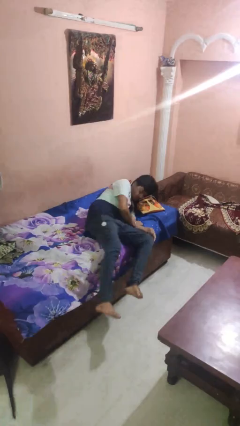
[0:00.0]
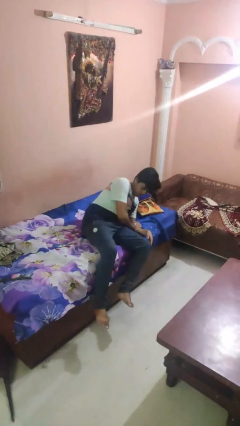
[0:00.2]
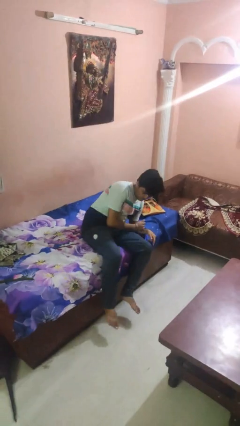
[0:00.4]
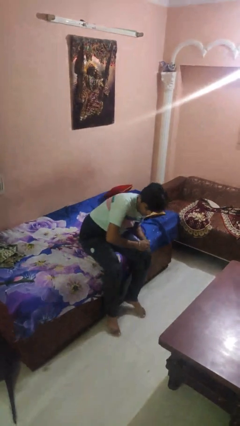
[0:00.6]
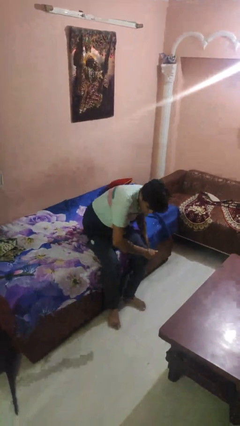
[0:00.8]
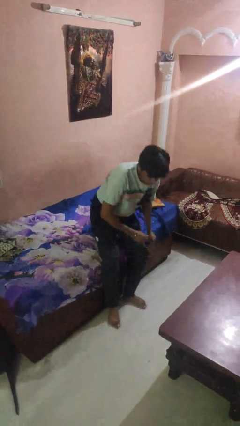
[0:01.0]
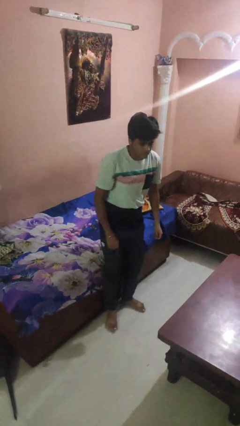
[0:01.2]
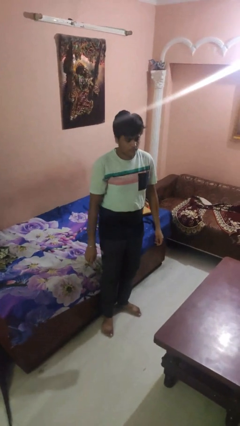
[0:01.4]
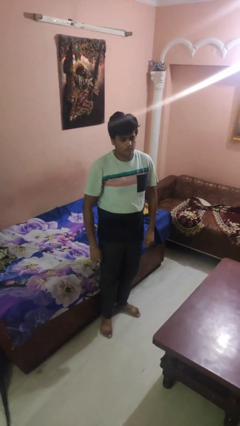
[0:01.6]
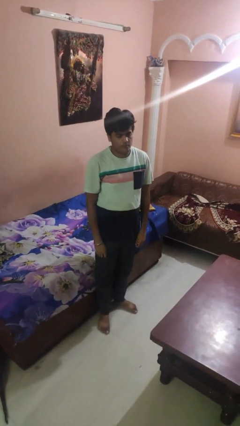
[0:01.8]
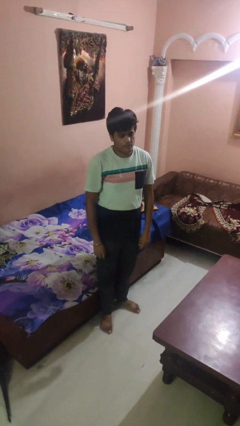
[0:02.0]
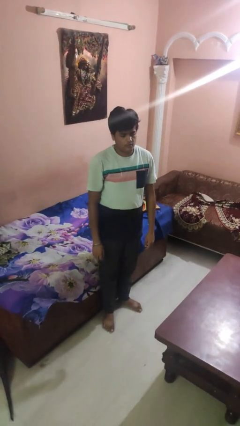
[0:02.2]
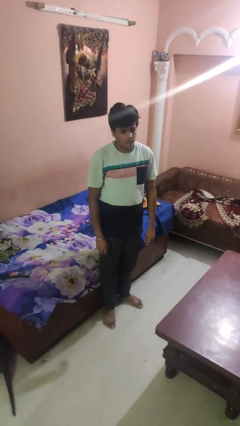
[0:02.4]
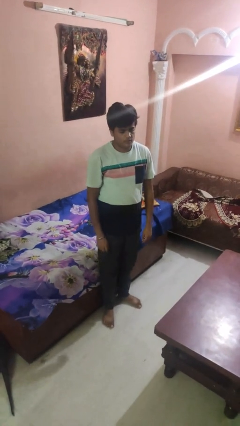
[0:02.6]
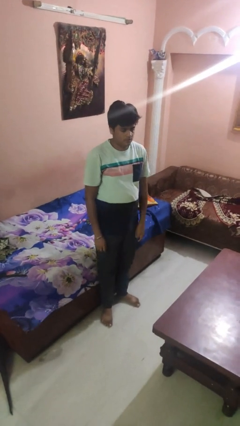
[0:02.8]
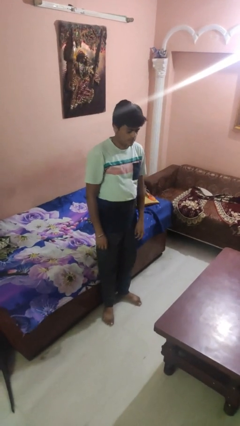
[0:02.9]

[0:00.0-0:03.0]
person stands up

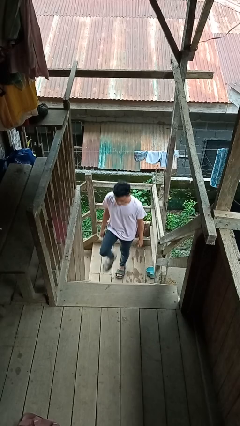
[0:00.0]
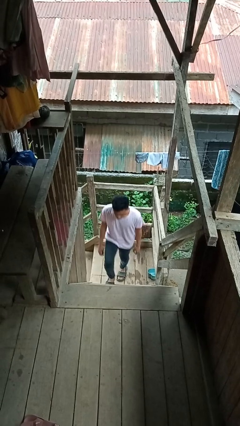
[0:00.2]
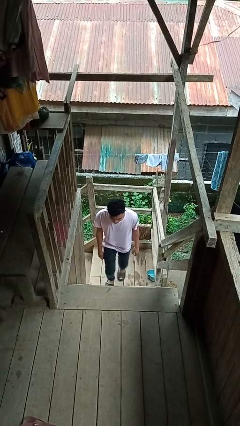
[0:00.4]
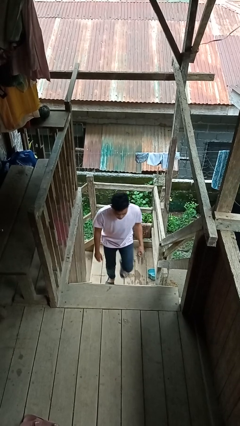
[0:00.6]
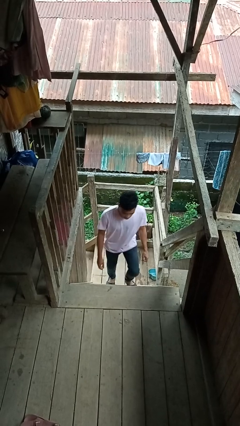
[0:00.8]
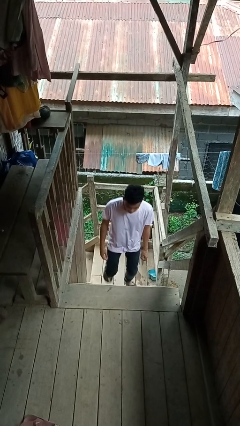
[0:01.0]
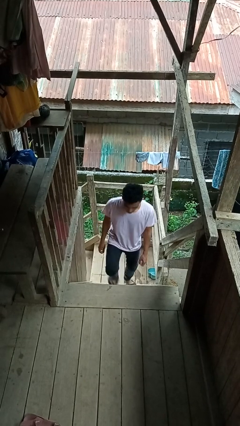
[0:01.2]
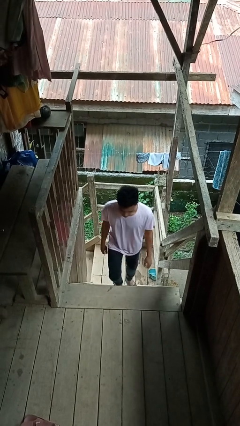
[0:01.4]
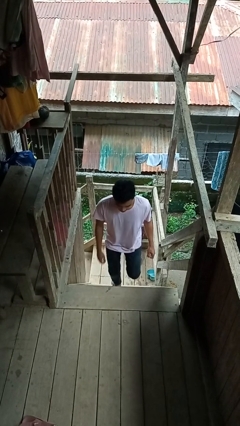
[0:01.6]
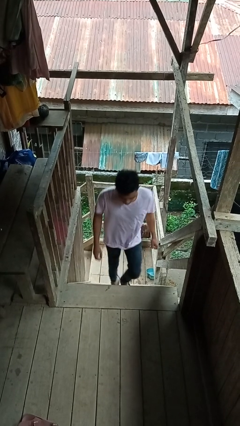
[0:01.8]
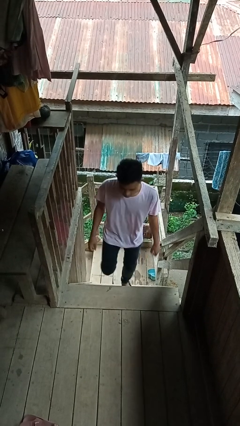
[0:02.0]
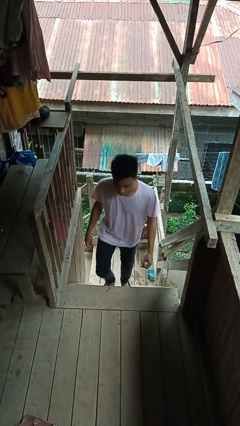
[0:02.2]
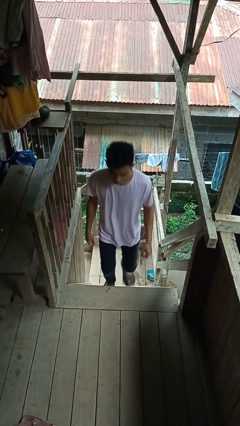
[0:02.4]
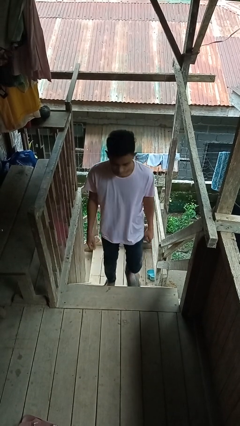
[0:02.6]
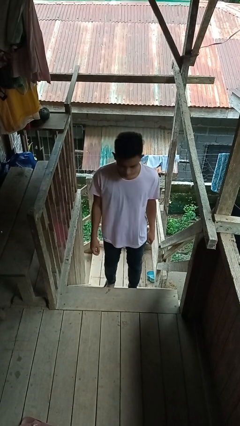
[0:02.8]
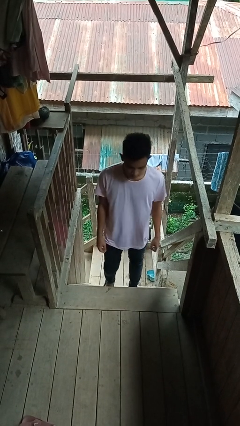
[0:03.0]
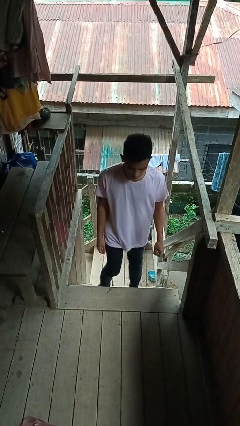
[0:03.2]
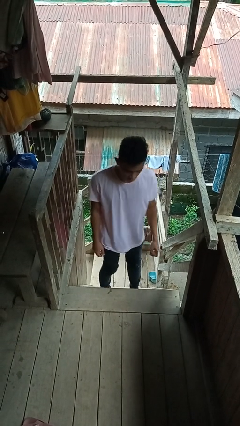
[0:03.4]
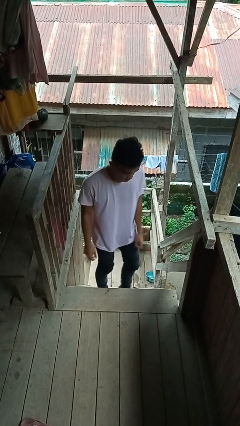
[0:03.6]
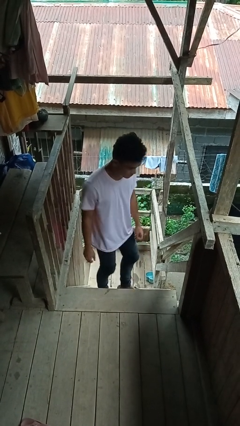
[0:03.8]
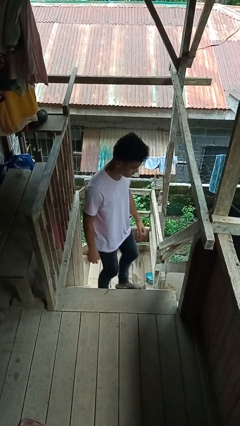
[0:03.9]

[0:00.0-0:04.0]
person climbs up stairs

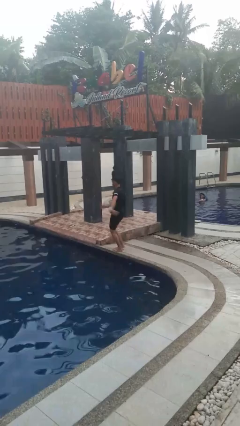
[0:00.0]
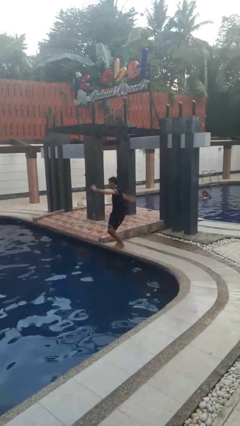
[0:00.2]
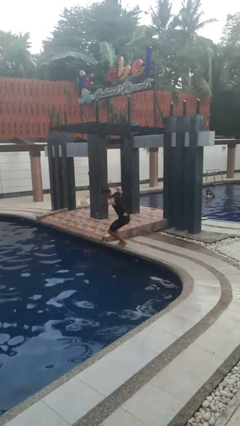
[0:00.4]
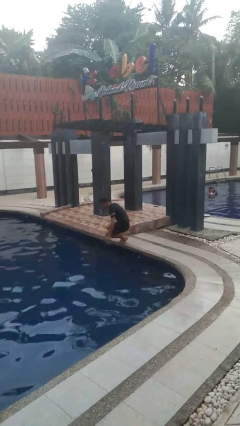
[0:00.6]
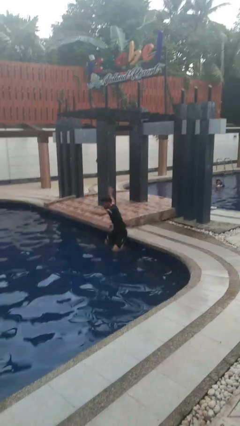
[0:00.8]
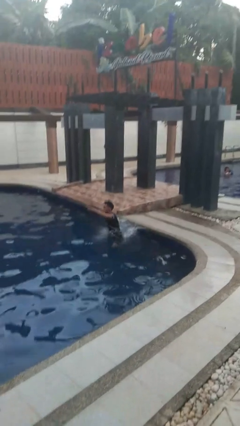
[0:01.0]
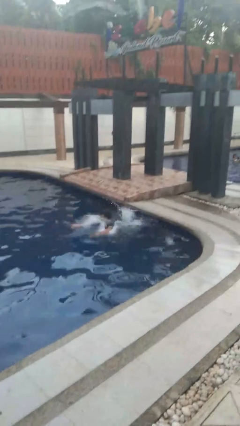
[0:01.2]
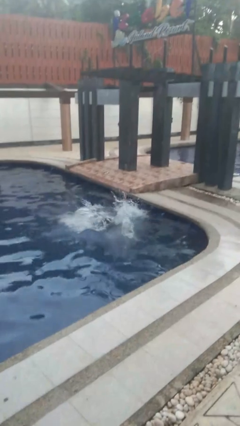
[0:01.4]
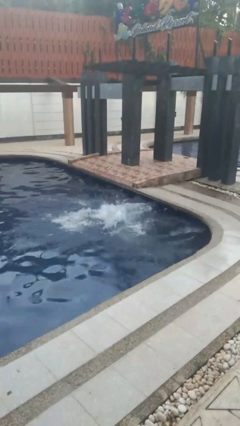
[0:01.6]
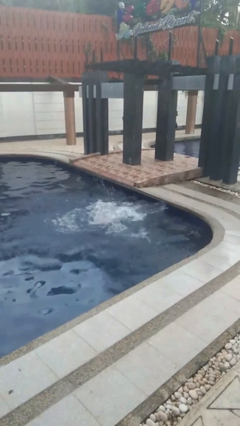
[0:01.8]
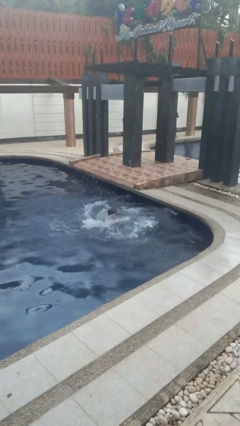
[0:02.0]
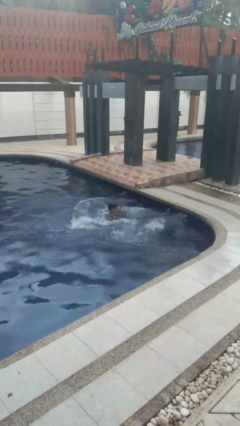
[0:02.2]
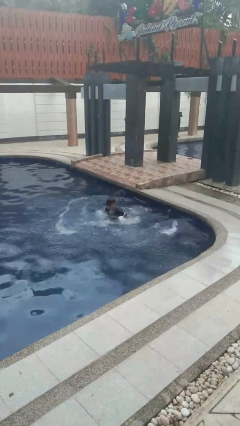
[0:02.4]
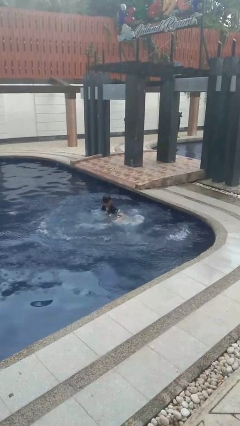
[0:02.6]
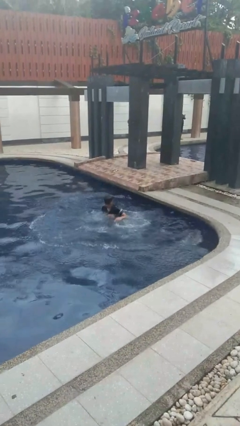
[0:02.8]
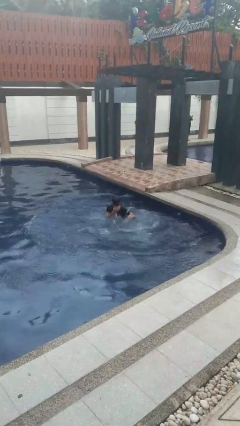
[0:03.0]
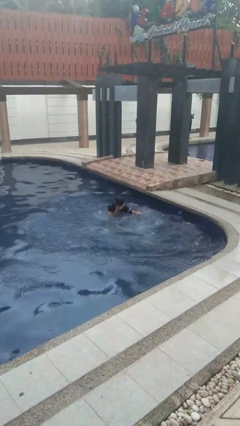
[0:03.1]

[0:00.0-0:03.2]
person falls into pool

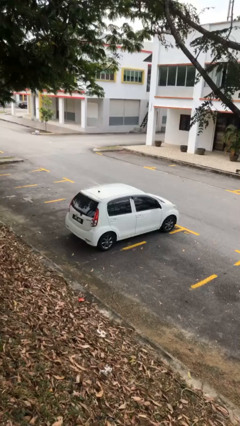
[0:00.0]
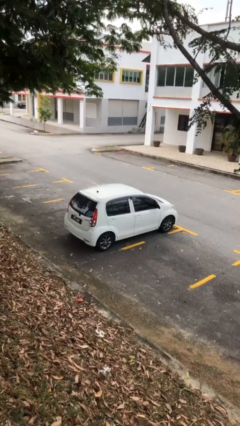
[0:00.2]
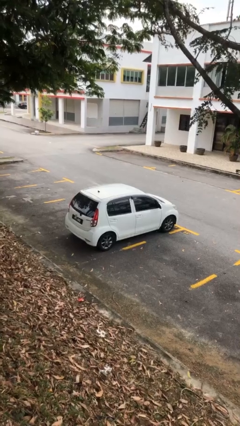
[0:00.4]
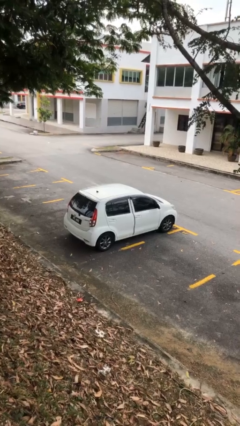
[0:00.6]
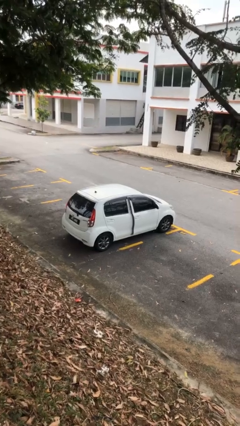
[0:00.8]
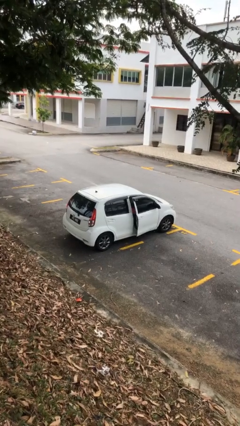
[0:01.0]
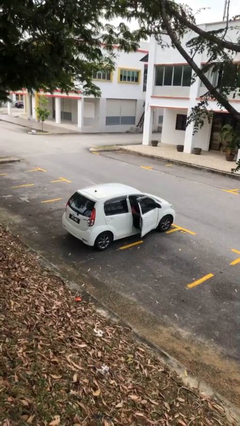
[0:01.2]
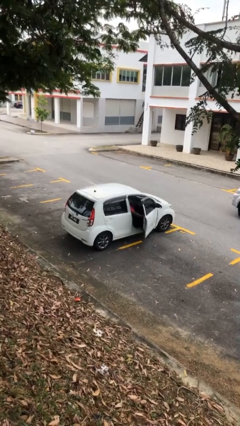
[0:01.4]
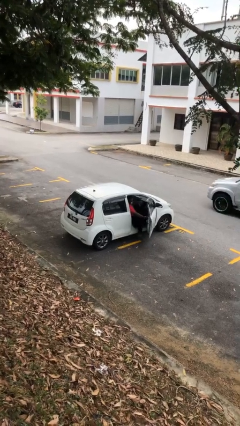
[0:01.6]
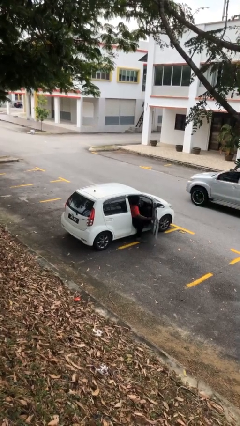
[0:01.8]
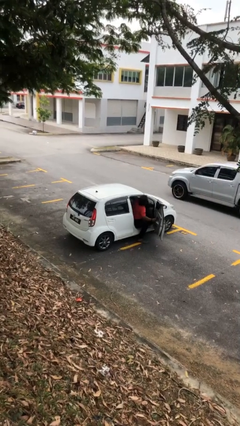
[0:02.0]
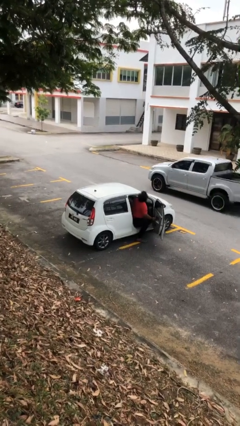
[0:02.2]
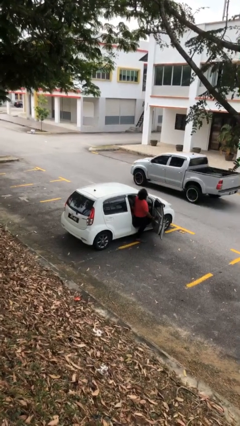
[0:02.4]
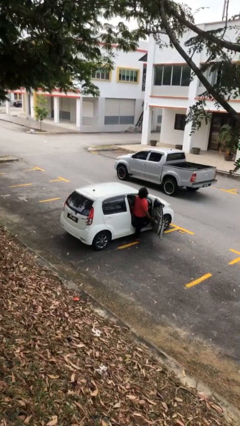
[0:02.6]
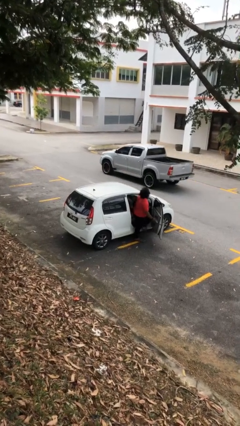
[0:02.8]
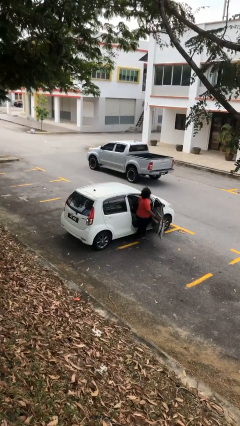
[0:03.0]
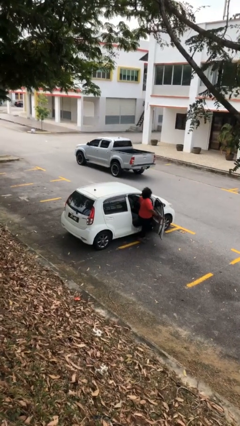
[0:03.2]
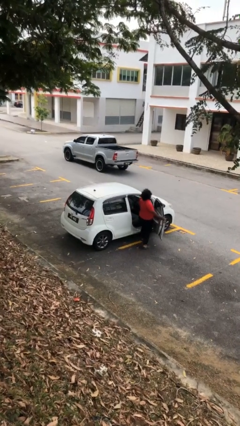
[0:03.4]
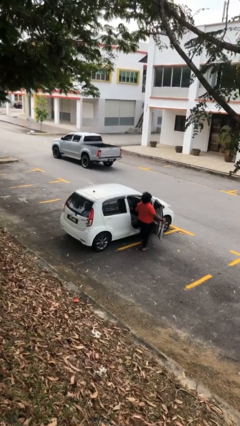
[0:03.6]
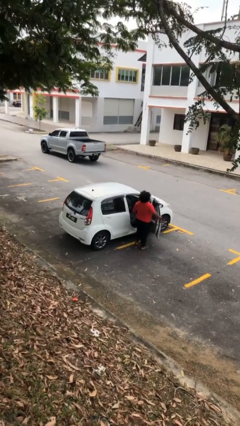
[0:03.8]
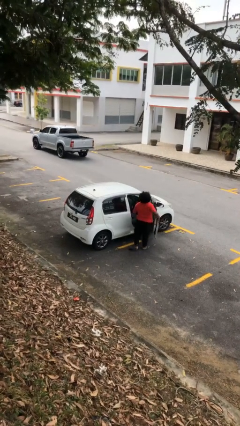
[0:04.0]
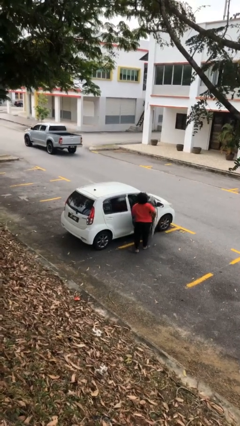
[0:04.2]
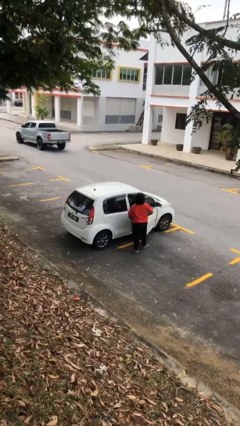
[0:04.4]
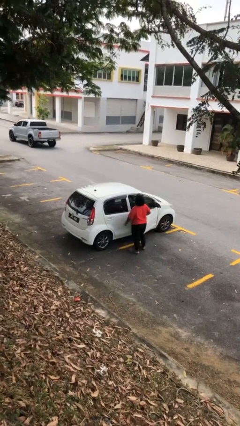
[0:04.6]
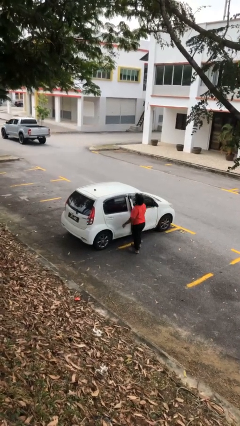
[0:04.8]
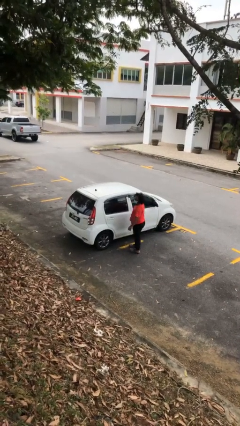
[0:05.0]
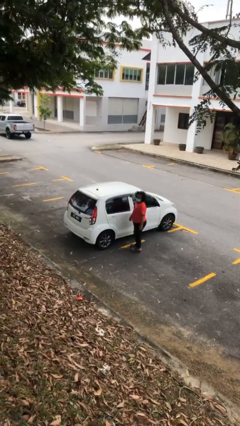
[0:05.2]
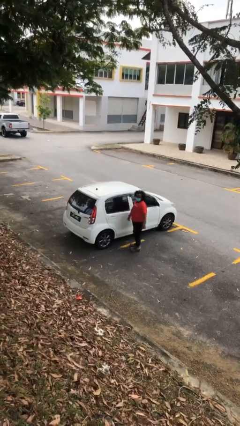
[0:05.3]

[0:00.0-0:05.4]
car drops off person

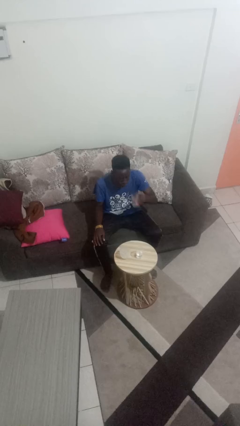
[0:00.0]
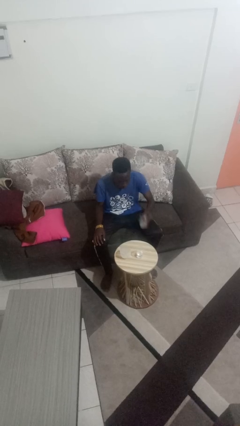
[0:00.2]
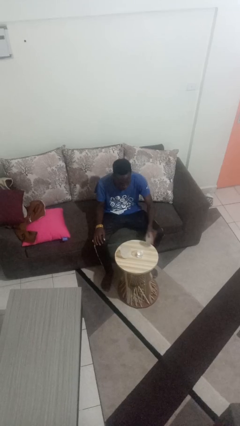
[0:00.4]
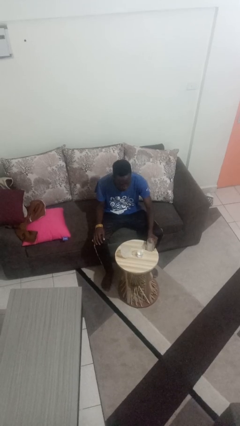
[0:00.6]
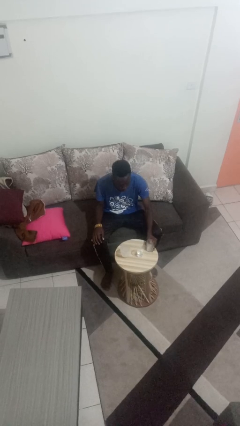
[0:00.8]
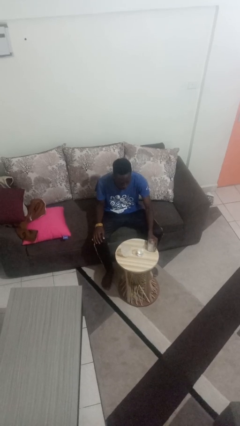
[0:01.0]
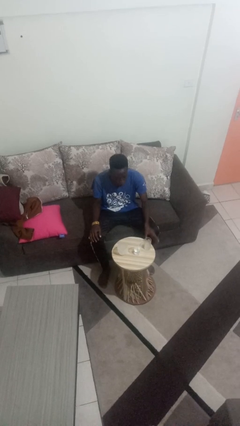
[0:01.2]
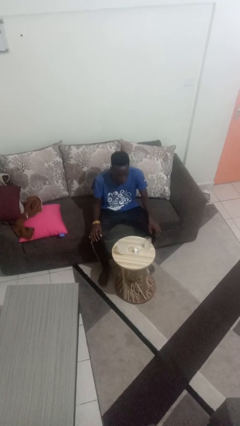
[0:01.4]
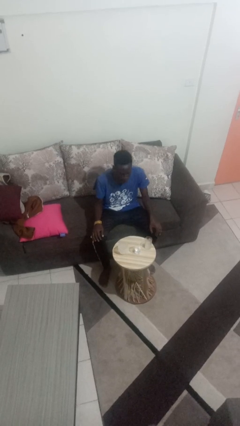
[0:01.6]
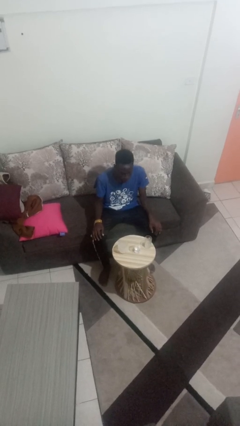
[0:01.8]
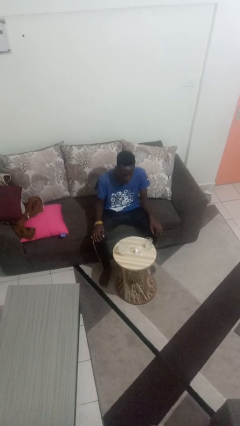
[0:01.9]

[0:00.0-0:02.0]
person puts down object on table
